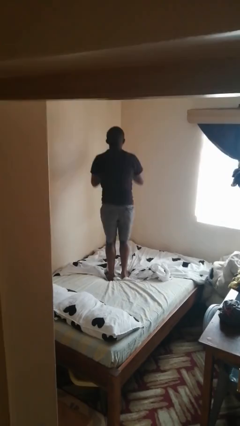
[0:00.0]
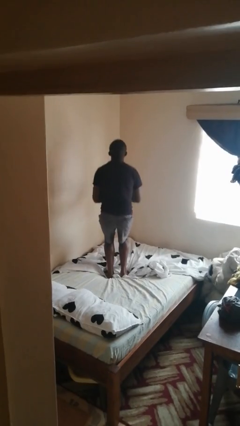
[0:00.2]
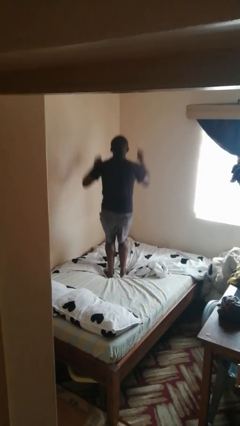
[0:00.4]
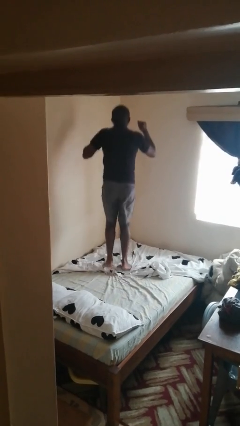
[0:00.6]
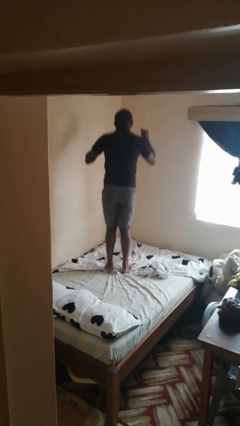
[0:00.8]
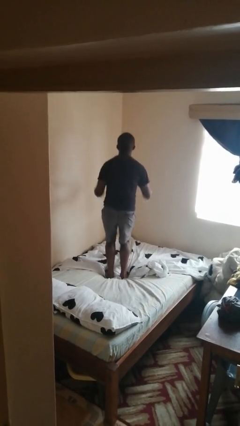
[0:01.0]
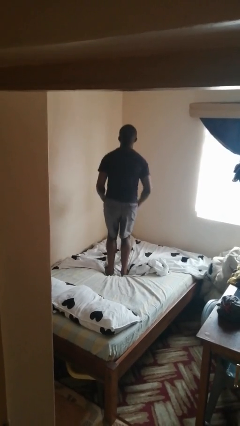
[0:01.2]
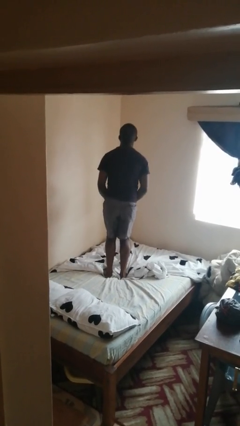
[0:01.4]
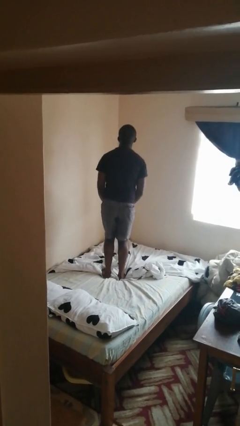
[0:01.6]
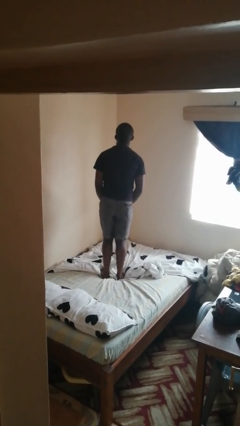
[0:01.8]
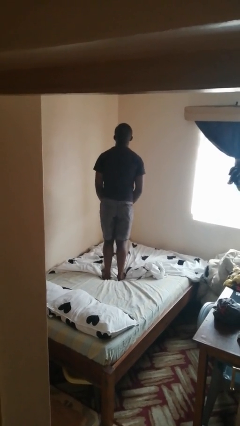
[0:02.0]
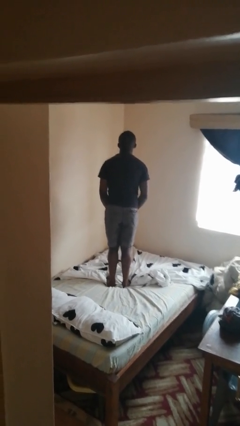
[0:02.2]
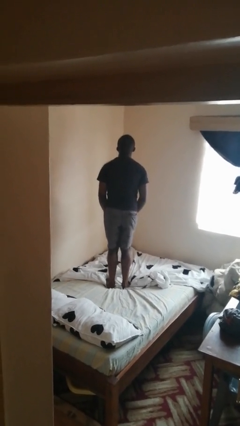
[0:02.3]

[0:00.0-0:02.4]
person jumps on bed

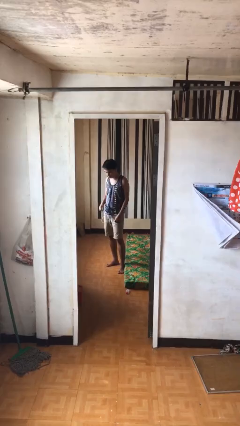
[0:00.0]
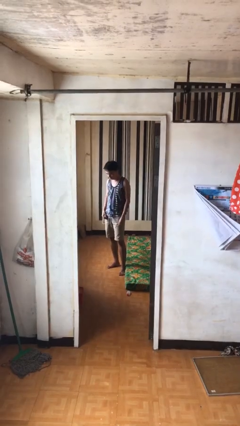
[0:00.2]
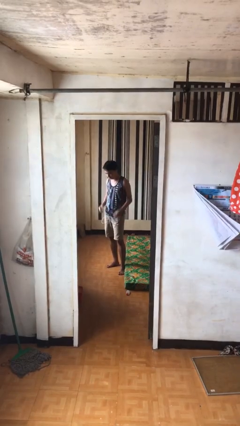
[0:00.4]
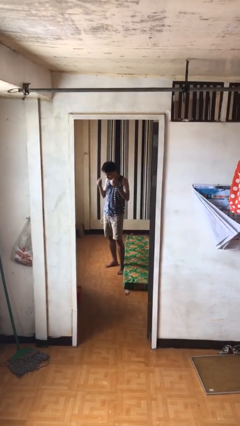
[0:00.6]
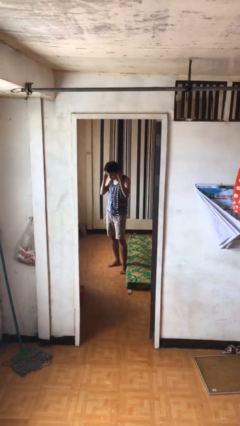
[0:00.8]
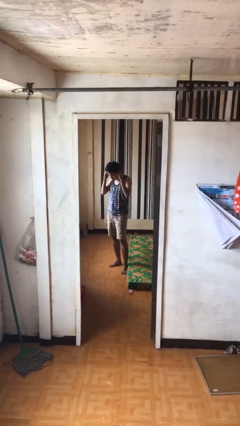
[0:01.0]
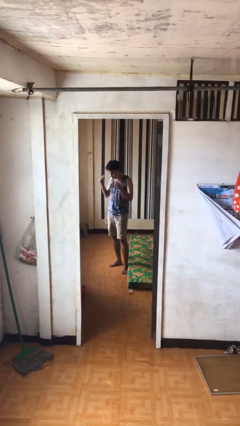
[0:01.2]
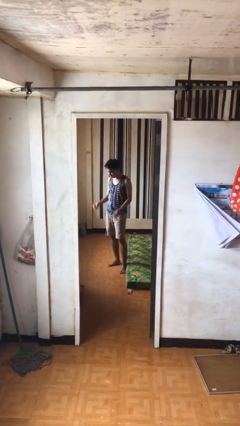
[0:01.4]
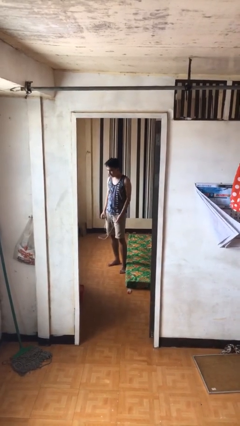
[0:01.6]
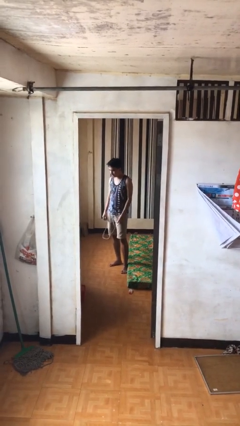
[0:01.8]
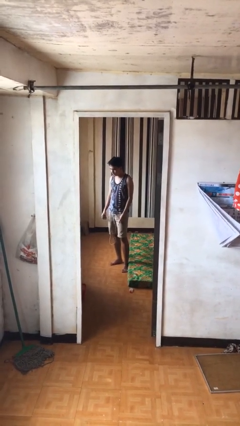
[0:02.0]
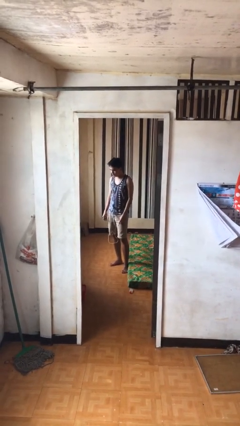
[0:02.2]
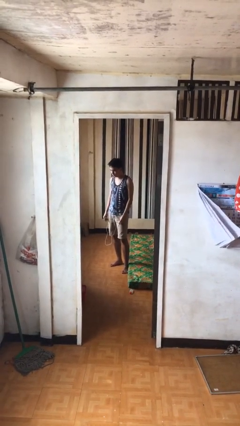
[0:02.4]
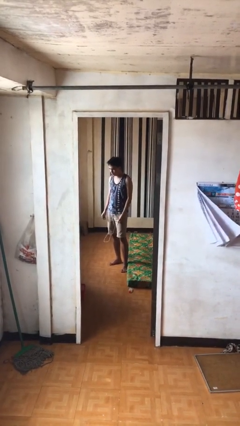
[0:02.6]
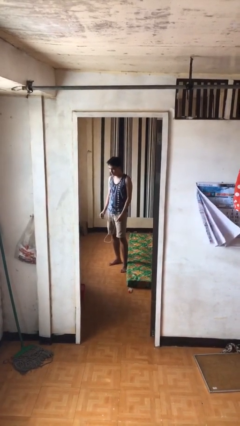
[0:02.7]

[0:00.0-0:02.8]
person takes off headphones

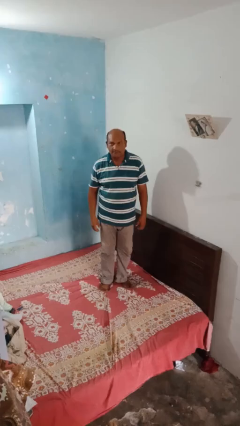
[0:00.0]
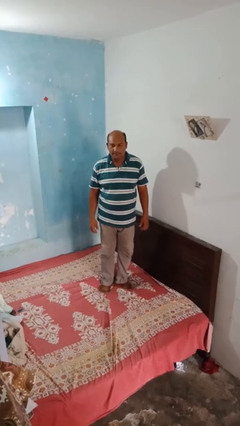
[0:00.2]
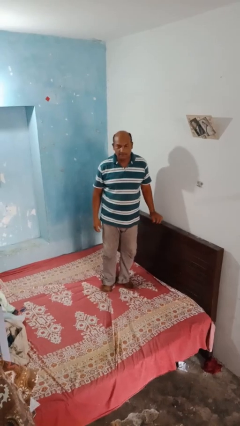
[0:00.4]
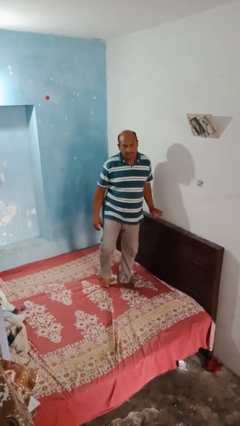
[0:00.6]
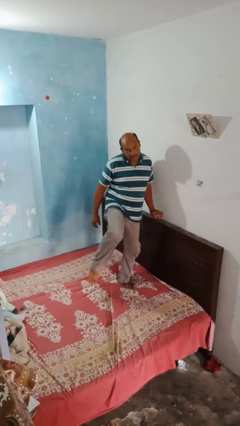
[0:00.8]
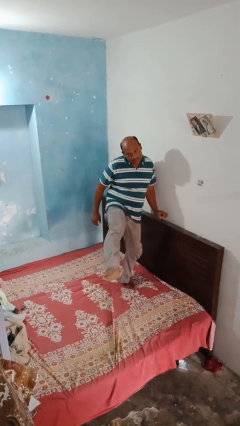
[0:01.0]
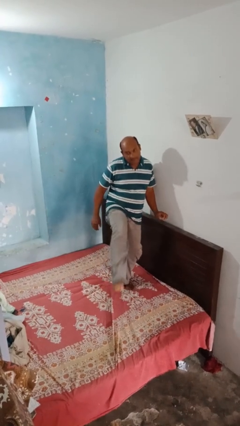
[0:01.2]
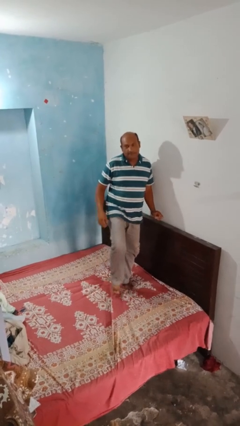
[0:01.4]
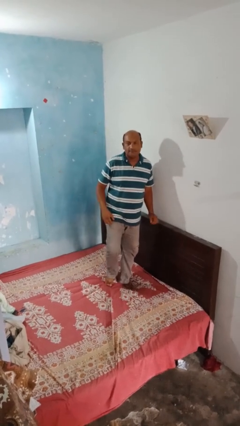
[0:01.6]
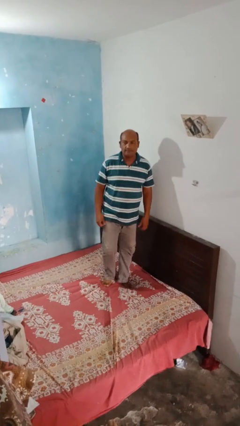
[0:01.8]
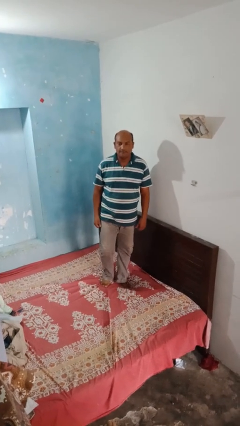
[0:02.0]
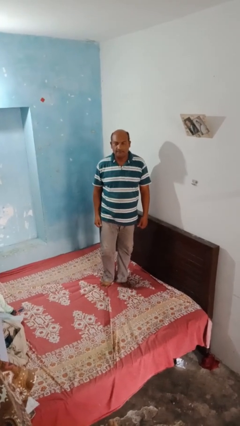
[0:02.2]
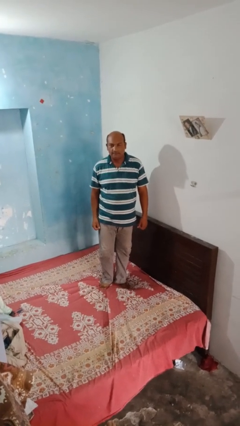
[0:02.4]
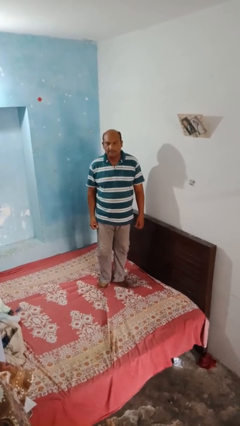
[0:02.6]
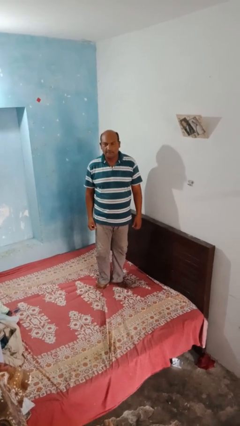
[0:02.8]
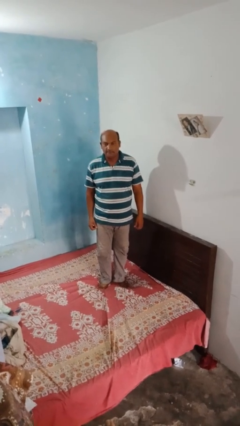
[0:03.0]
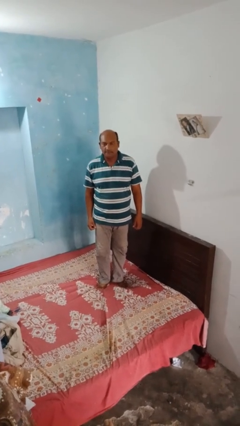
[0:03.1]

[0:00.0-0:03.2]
person karate kicks

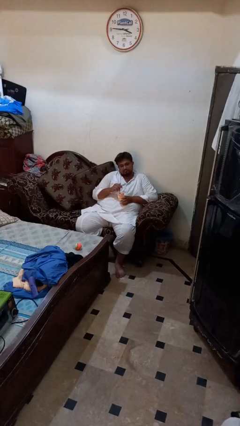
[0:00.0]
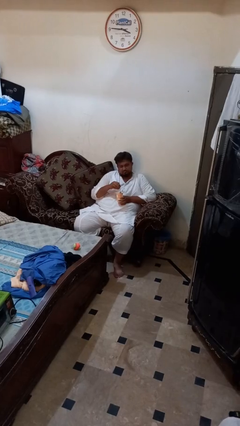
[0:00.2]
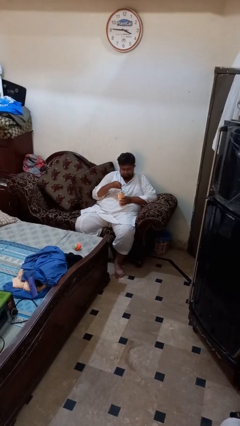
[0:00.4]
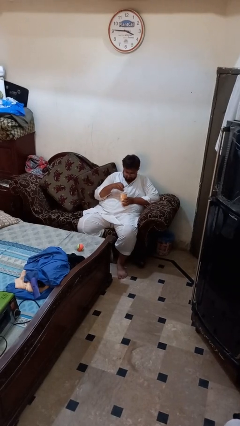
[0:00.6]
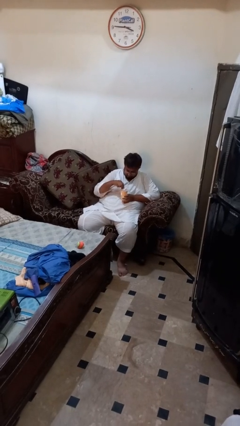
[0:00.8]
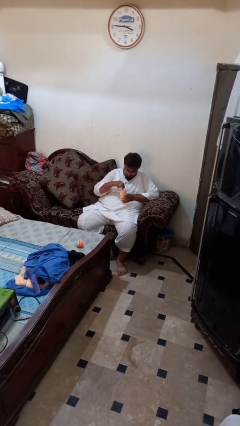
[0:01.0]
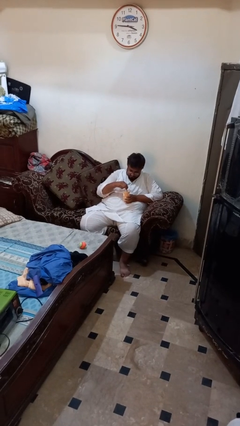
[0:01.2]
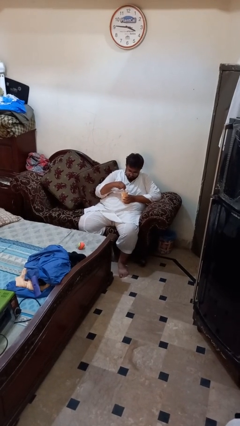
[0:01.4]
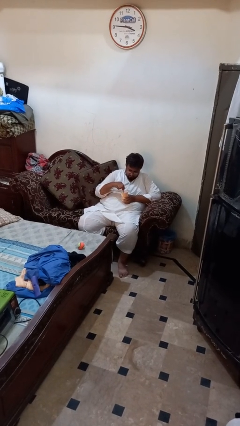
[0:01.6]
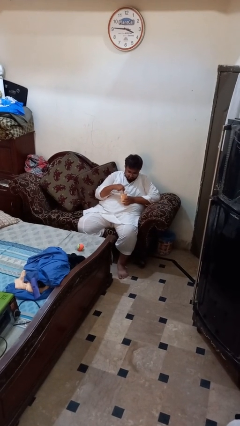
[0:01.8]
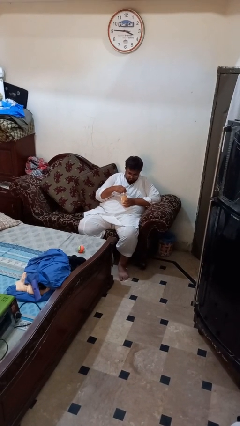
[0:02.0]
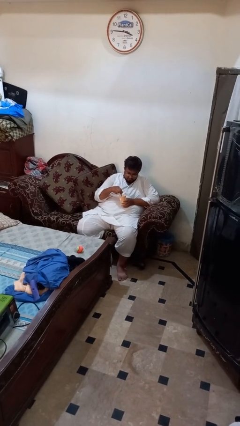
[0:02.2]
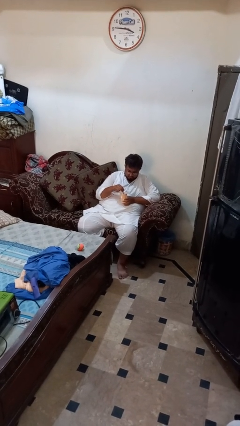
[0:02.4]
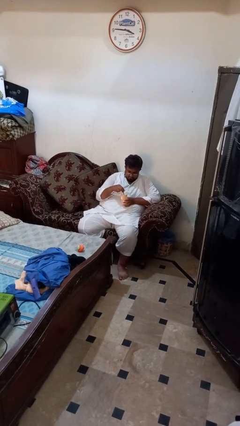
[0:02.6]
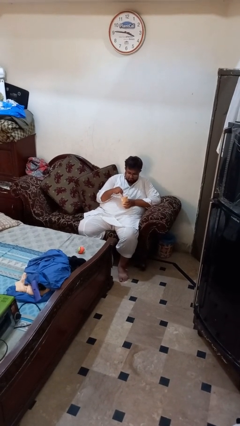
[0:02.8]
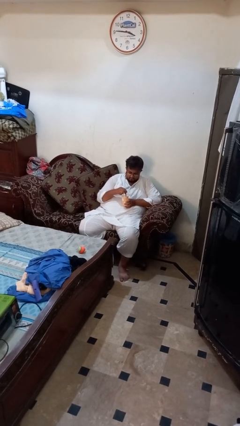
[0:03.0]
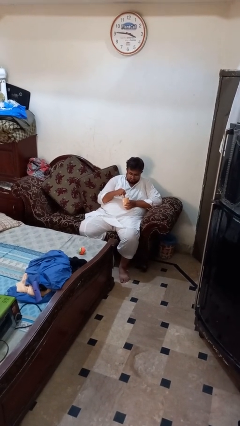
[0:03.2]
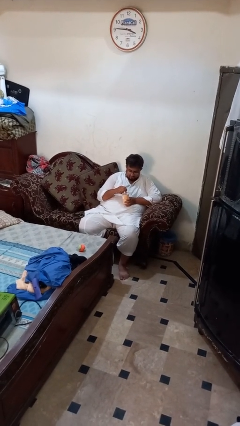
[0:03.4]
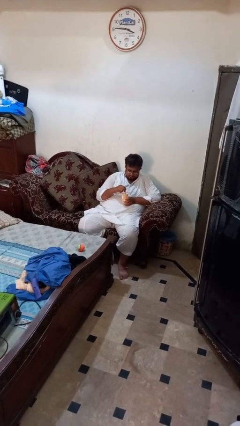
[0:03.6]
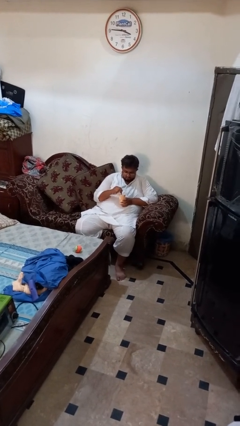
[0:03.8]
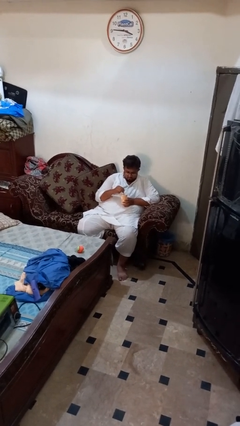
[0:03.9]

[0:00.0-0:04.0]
person stirs mug

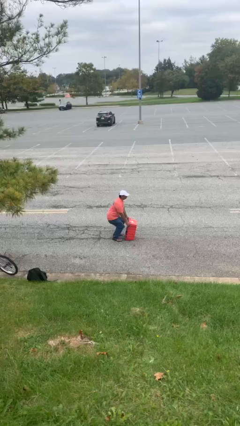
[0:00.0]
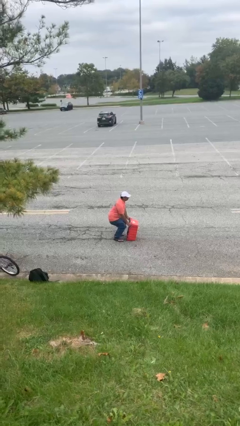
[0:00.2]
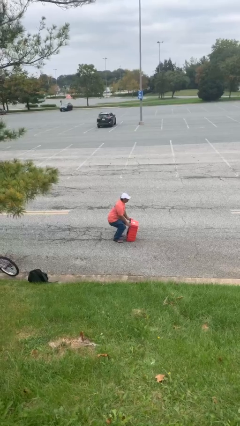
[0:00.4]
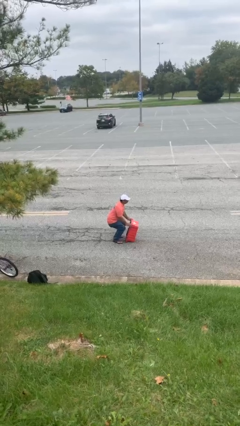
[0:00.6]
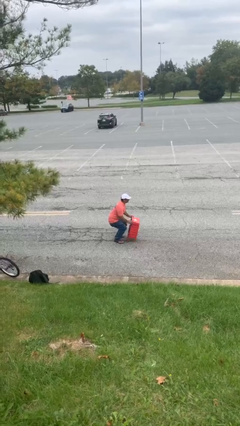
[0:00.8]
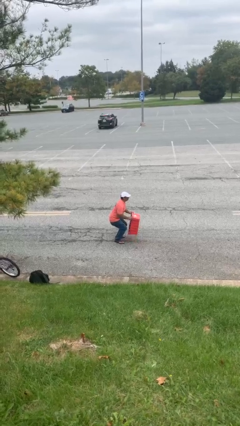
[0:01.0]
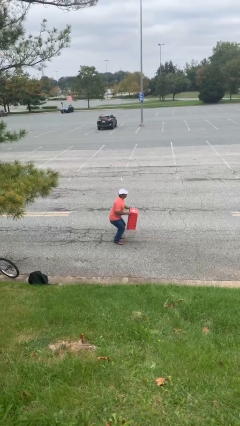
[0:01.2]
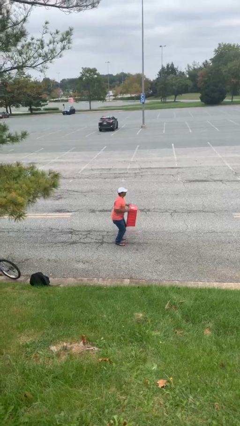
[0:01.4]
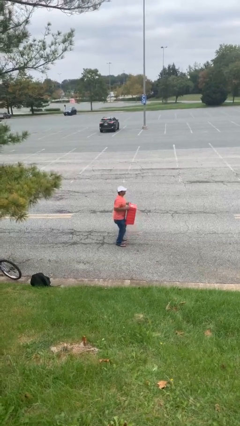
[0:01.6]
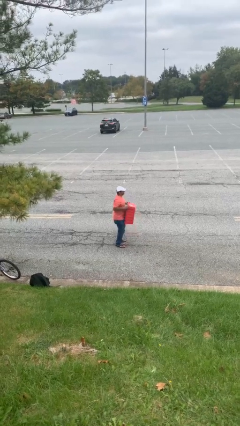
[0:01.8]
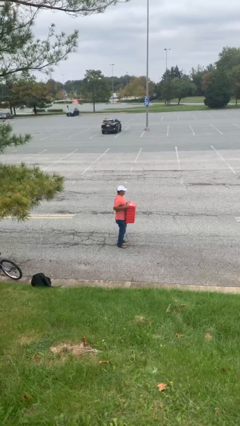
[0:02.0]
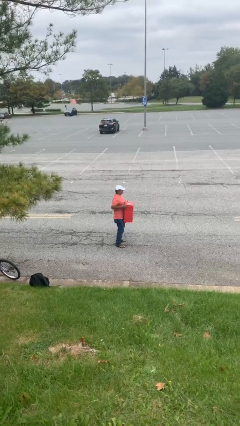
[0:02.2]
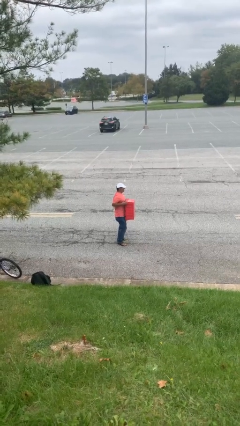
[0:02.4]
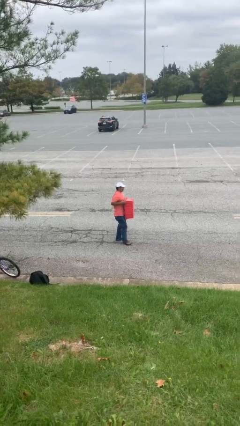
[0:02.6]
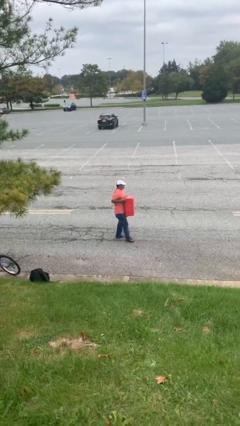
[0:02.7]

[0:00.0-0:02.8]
person picks up object from floor

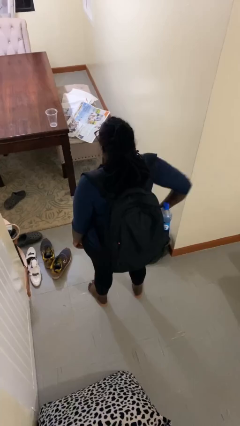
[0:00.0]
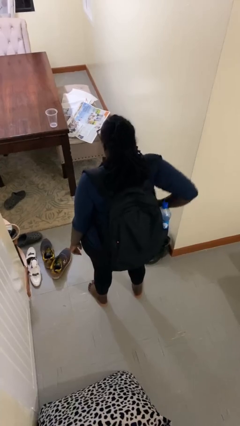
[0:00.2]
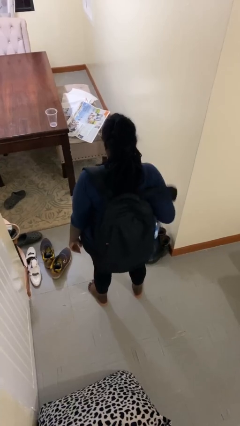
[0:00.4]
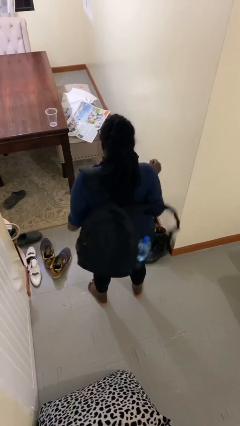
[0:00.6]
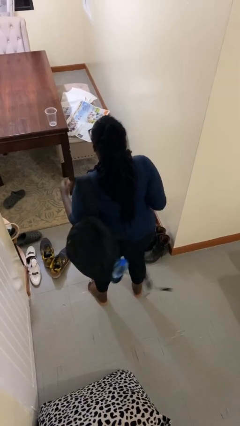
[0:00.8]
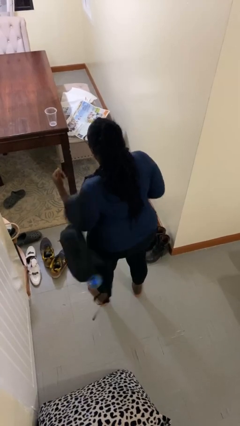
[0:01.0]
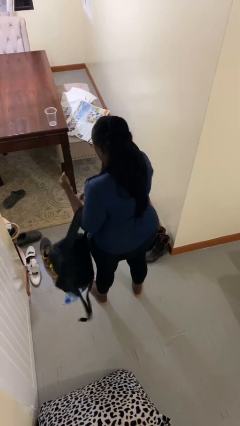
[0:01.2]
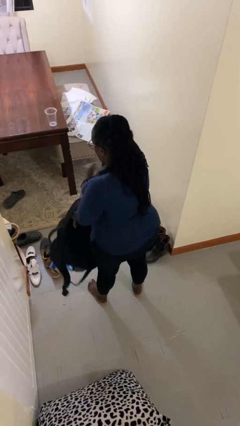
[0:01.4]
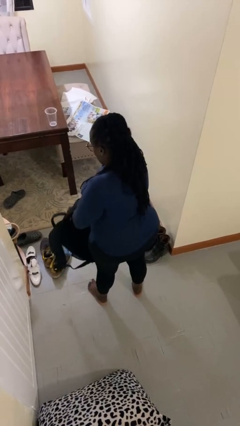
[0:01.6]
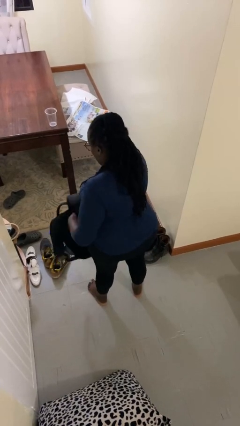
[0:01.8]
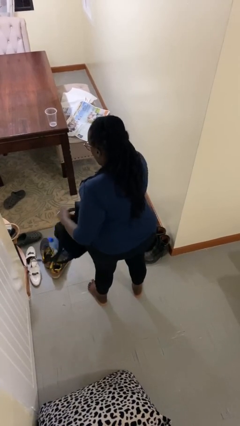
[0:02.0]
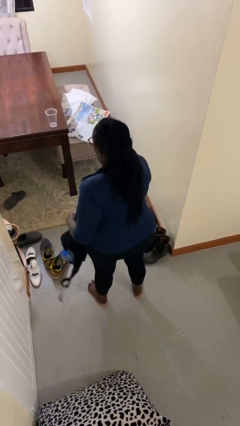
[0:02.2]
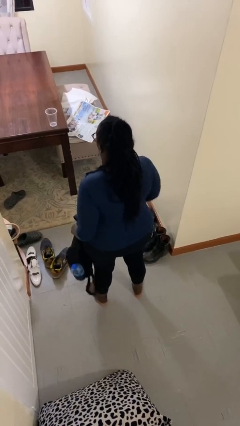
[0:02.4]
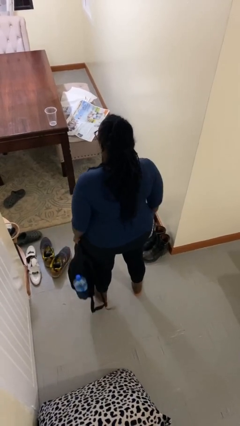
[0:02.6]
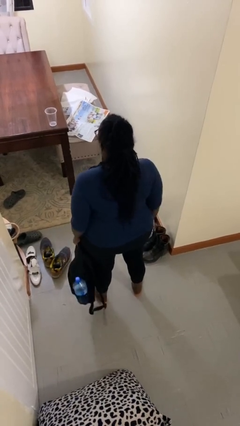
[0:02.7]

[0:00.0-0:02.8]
person takes off backpack
